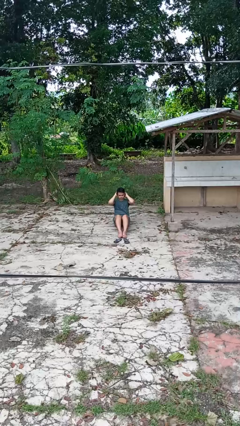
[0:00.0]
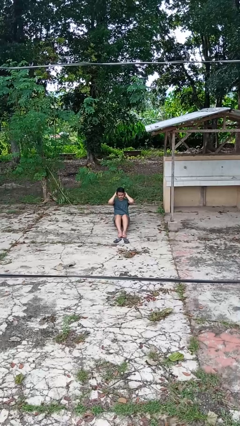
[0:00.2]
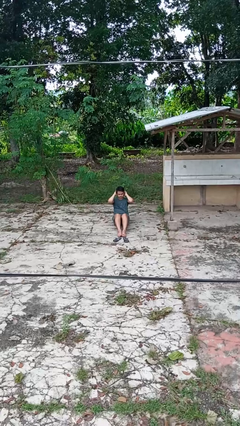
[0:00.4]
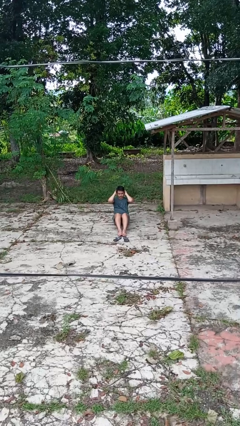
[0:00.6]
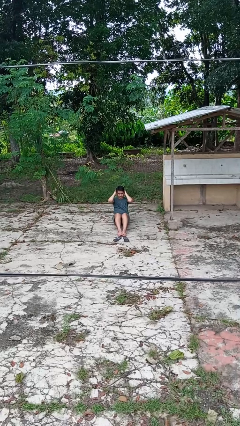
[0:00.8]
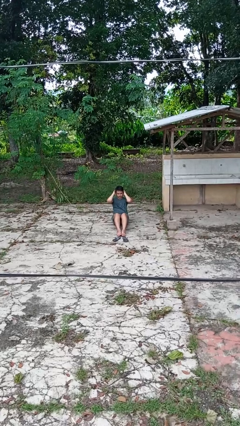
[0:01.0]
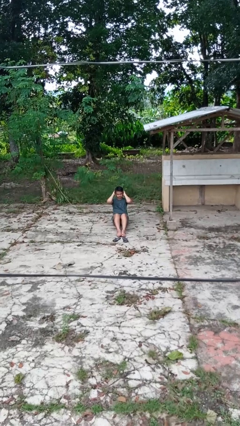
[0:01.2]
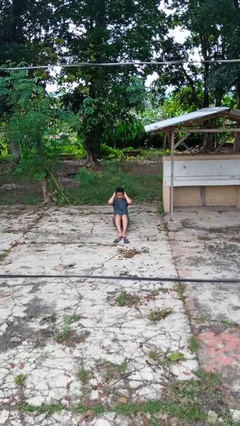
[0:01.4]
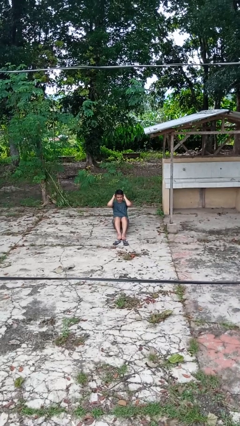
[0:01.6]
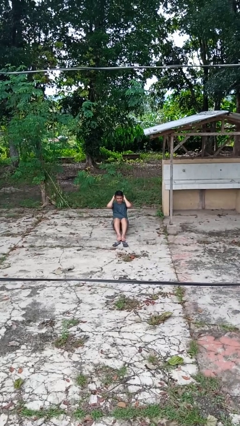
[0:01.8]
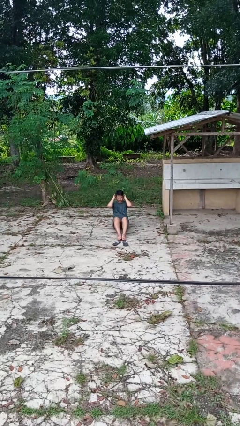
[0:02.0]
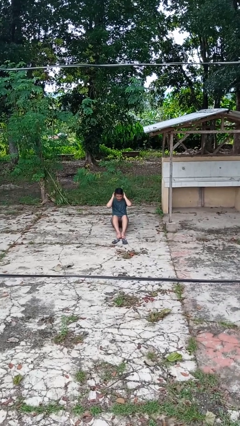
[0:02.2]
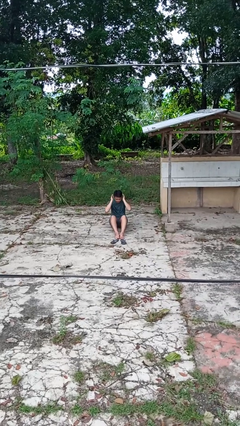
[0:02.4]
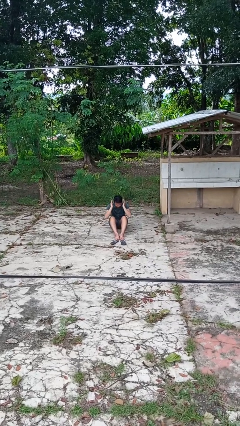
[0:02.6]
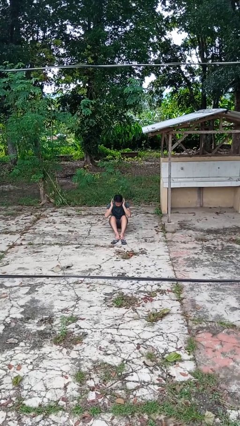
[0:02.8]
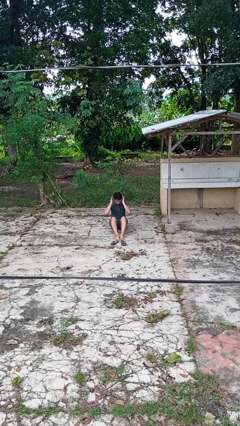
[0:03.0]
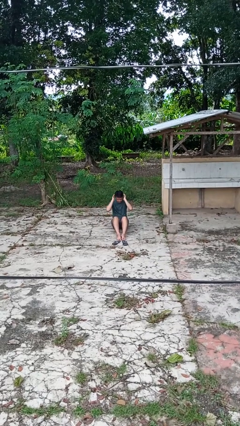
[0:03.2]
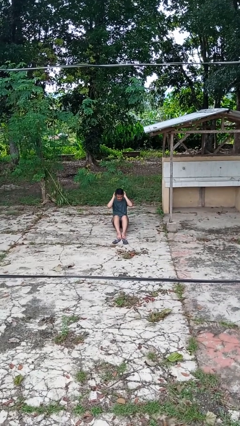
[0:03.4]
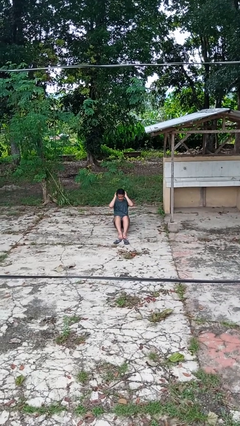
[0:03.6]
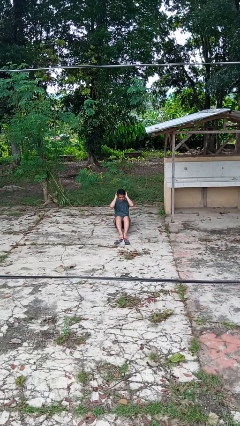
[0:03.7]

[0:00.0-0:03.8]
person exercises with situp

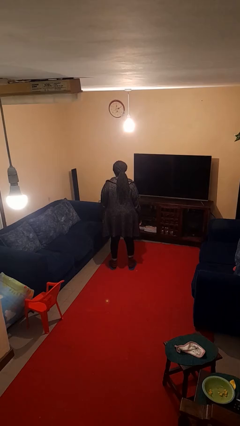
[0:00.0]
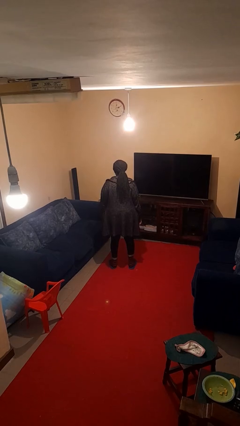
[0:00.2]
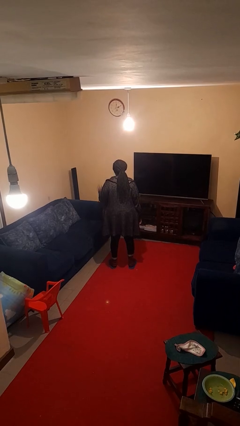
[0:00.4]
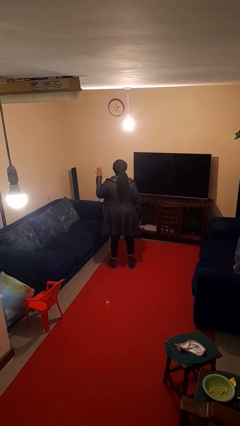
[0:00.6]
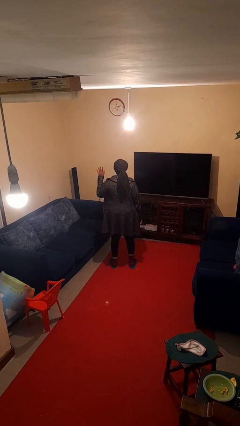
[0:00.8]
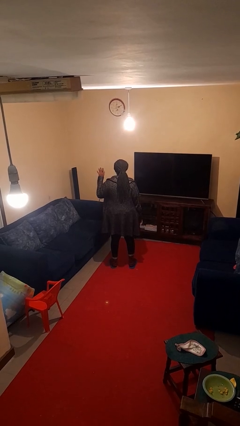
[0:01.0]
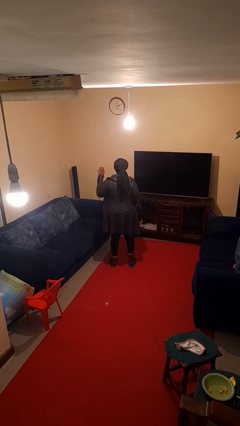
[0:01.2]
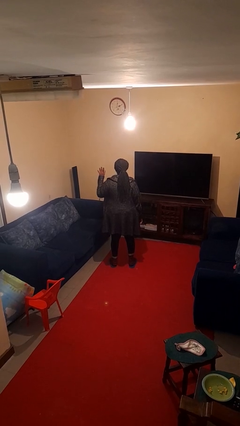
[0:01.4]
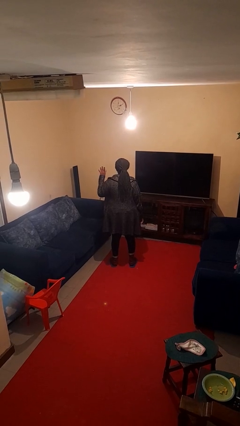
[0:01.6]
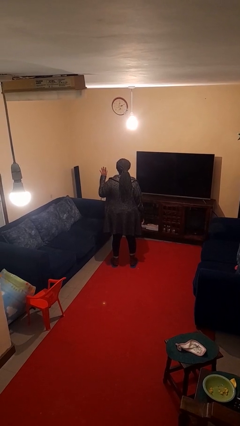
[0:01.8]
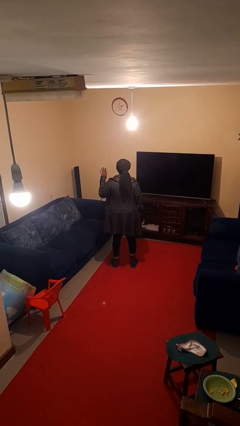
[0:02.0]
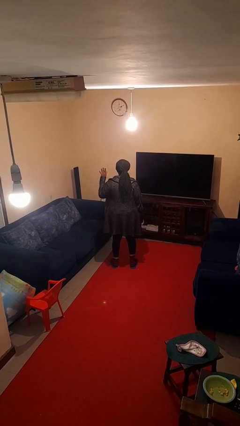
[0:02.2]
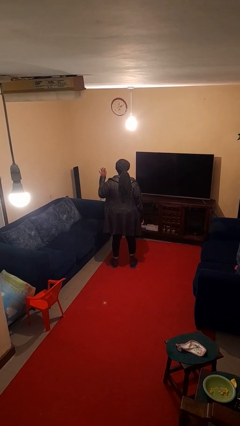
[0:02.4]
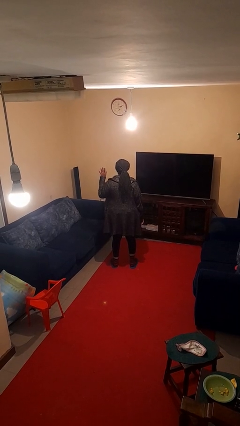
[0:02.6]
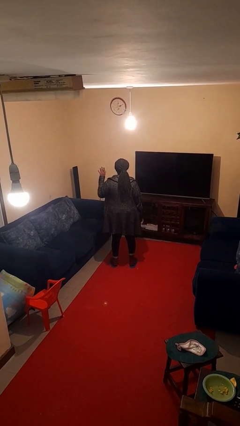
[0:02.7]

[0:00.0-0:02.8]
person gestures number five

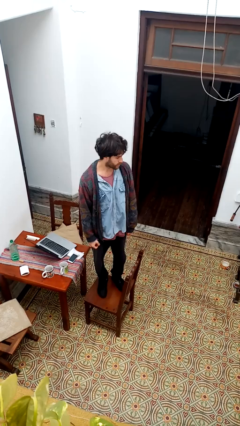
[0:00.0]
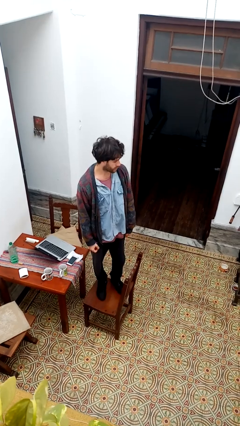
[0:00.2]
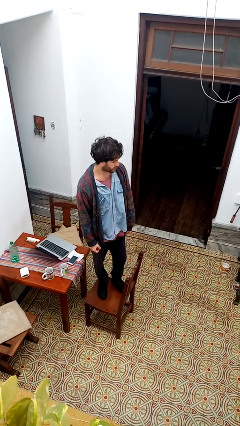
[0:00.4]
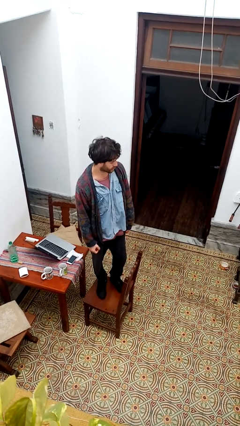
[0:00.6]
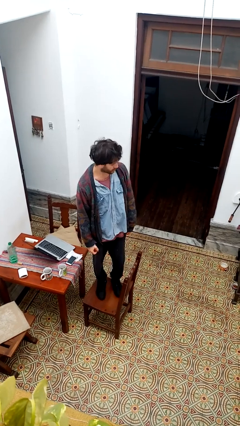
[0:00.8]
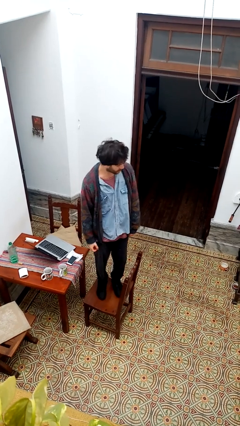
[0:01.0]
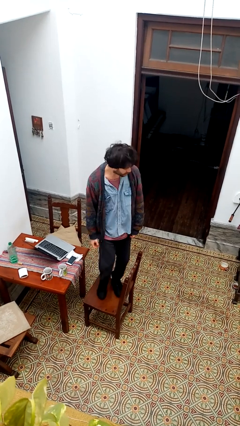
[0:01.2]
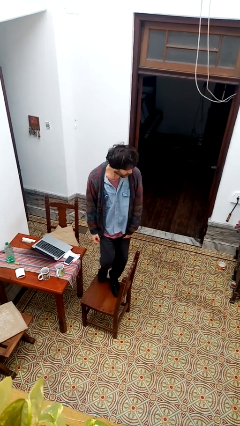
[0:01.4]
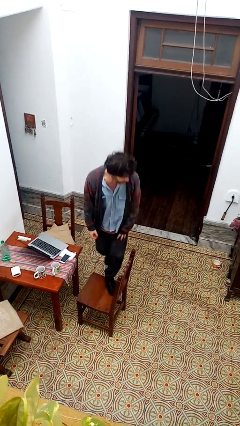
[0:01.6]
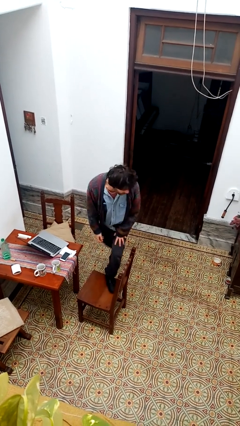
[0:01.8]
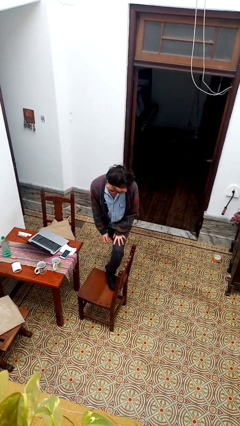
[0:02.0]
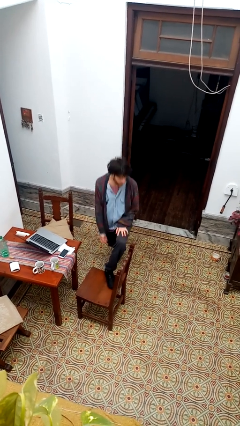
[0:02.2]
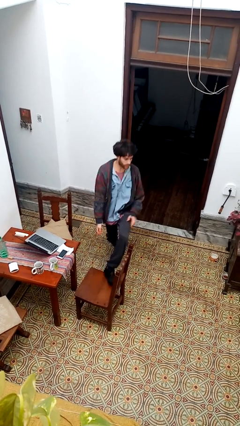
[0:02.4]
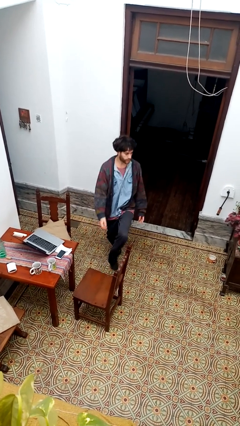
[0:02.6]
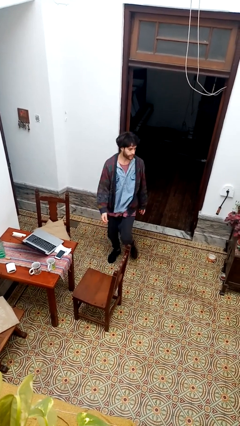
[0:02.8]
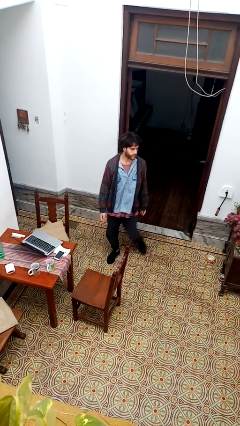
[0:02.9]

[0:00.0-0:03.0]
person climbs off chair

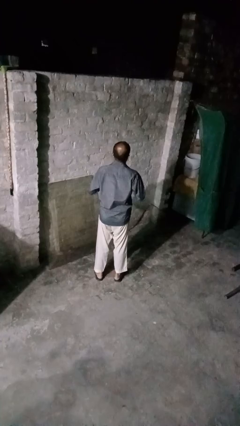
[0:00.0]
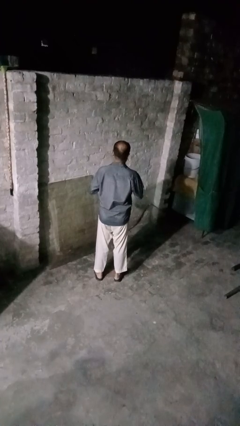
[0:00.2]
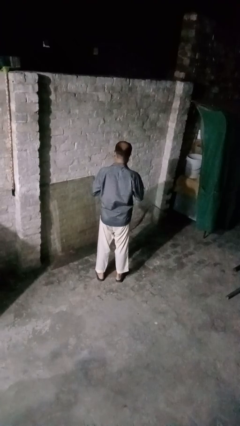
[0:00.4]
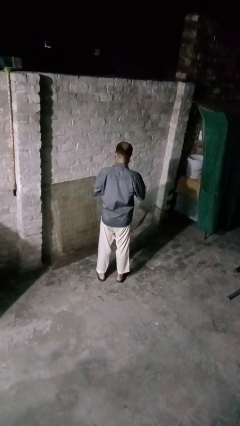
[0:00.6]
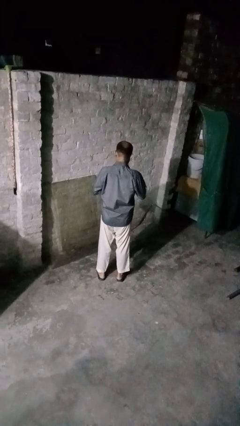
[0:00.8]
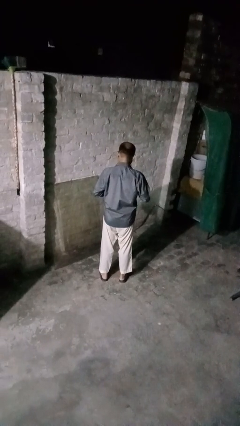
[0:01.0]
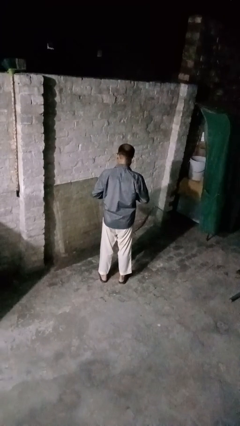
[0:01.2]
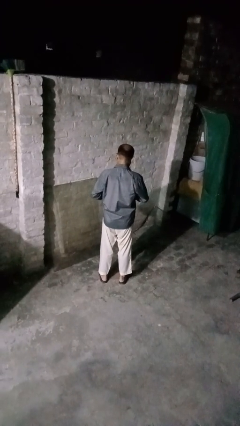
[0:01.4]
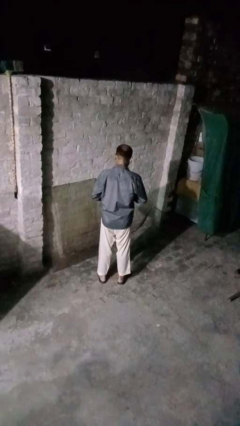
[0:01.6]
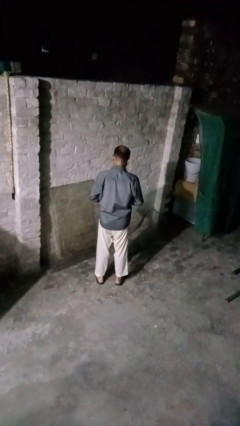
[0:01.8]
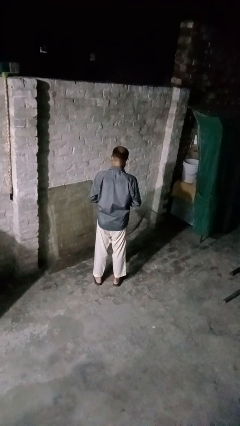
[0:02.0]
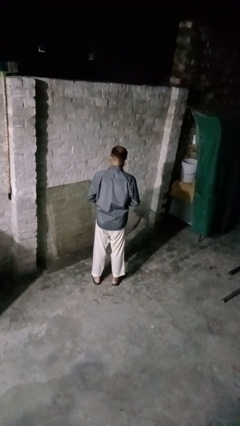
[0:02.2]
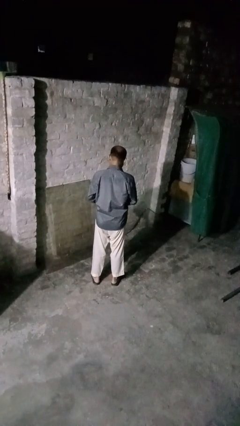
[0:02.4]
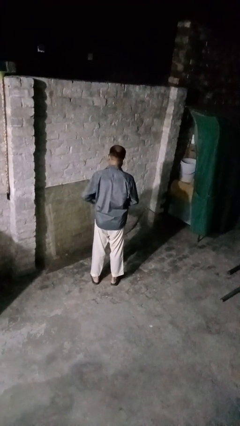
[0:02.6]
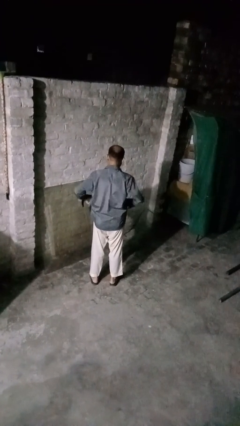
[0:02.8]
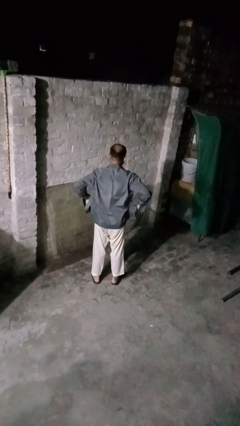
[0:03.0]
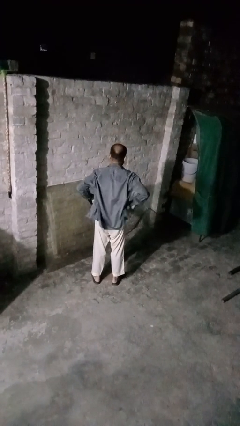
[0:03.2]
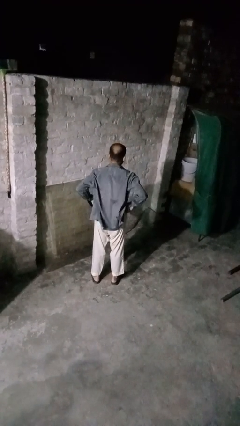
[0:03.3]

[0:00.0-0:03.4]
person unbuttons shirt

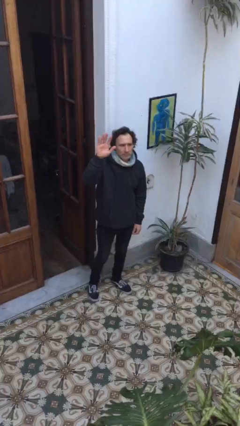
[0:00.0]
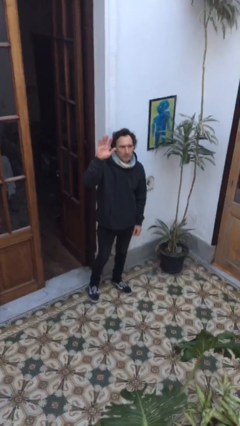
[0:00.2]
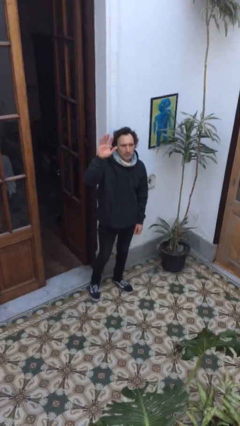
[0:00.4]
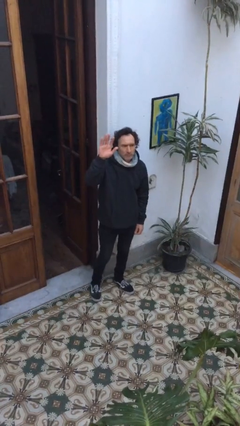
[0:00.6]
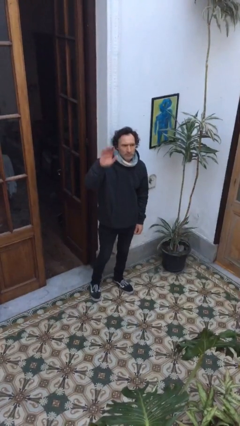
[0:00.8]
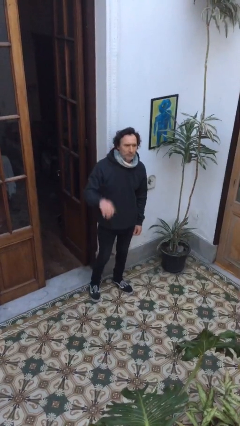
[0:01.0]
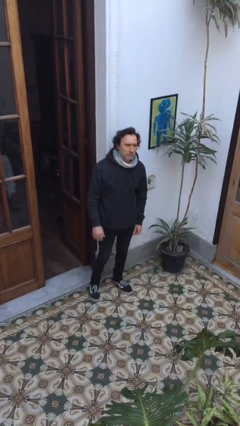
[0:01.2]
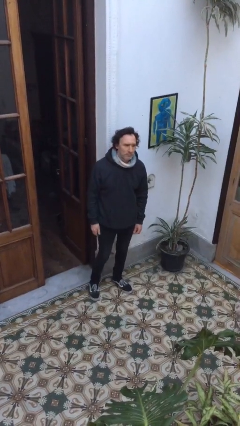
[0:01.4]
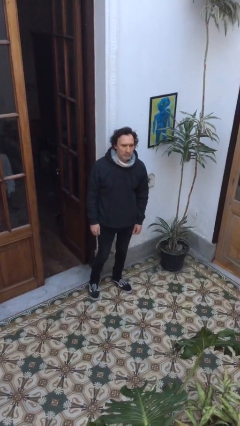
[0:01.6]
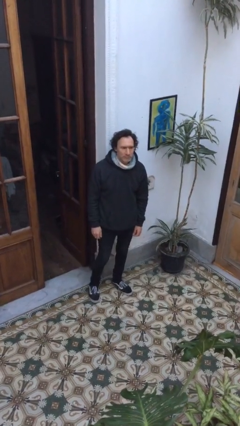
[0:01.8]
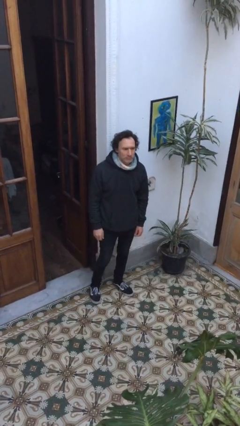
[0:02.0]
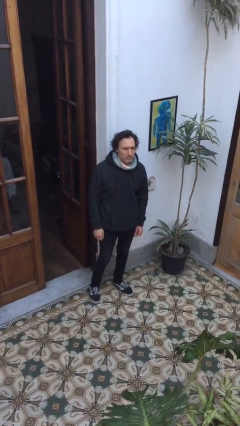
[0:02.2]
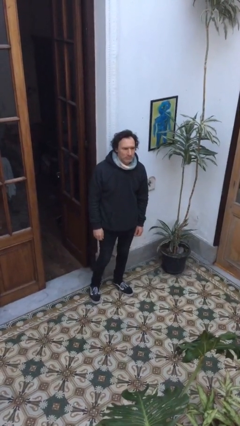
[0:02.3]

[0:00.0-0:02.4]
person gestures lower hand

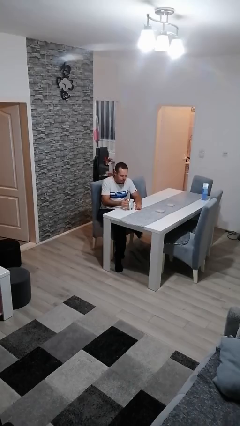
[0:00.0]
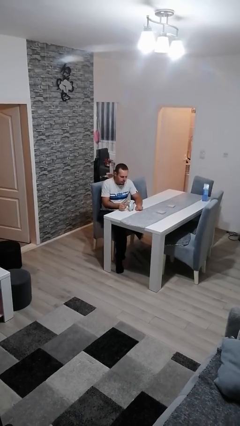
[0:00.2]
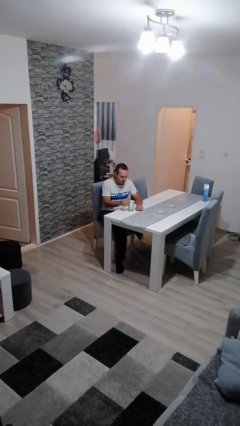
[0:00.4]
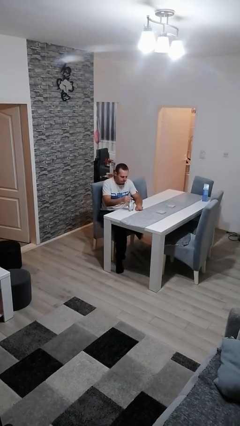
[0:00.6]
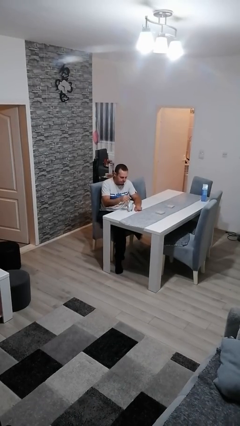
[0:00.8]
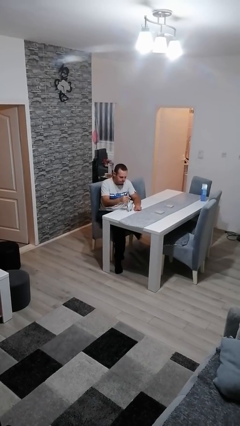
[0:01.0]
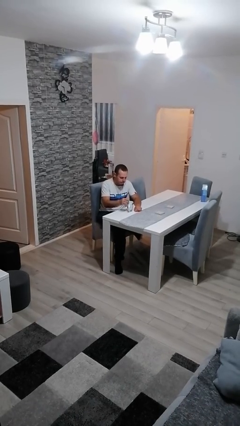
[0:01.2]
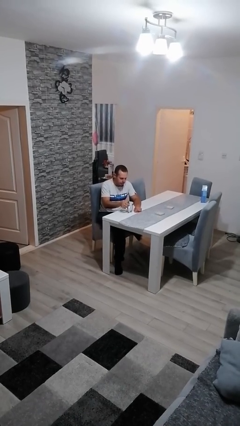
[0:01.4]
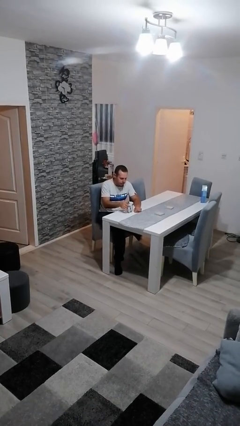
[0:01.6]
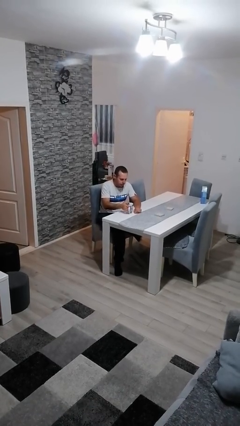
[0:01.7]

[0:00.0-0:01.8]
person stirs mug

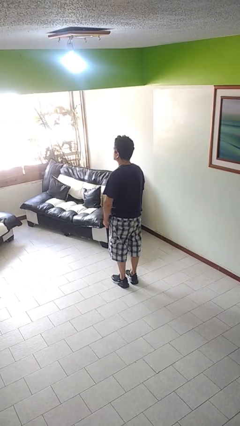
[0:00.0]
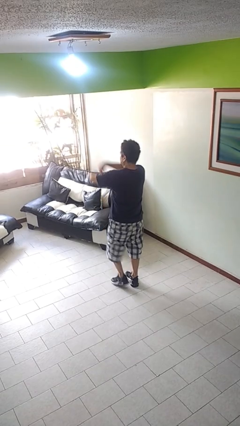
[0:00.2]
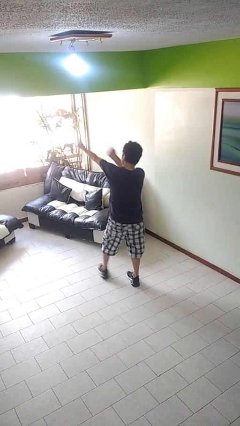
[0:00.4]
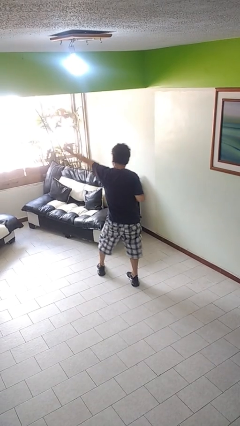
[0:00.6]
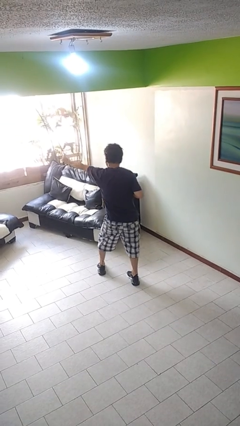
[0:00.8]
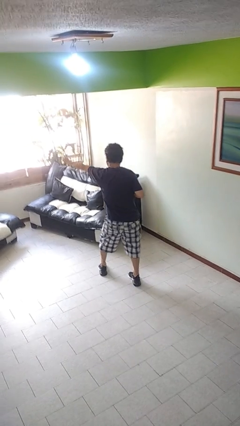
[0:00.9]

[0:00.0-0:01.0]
person karate chop
